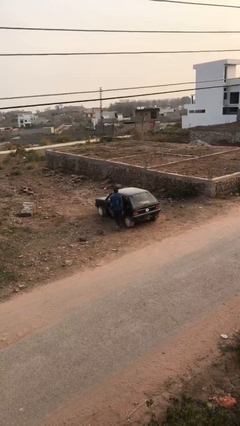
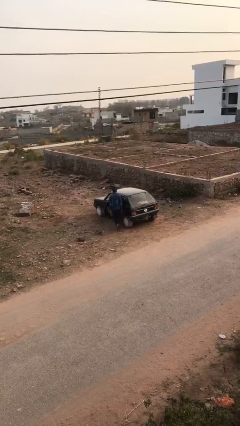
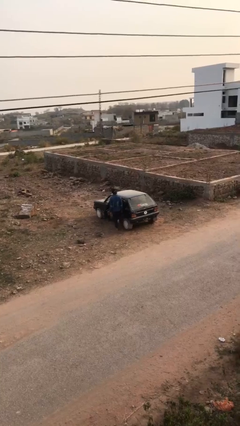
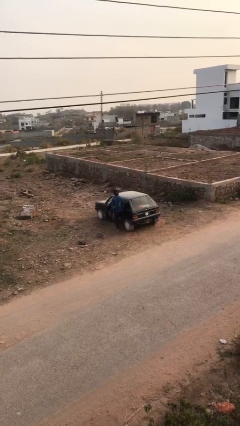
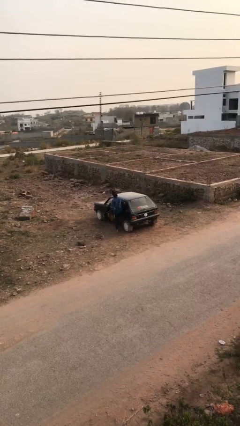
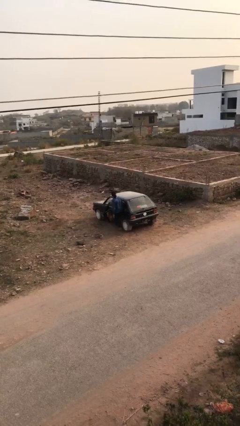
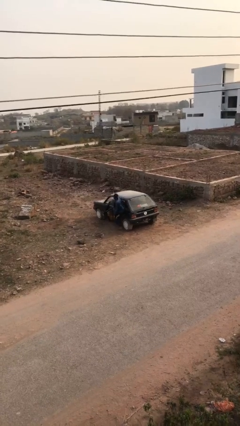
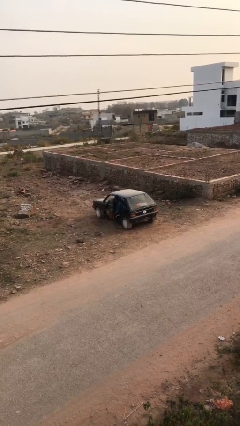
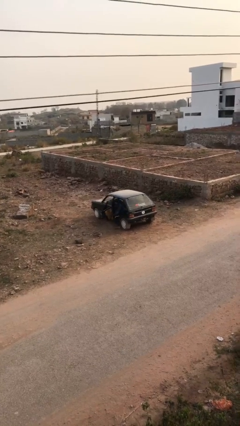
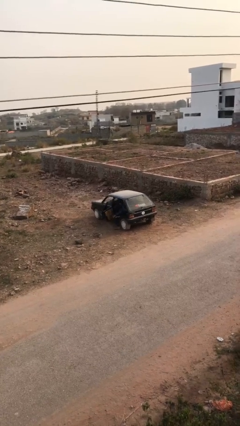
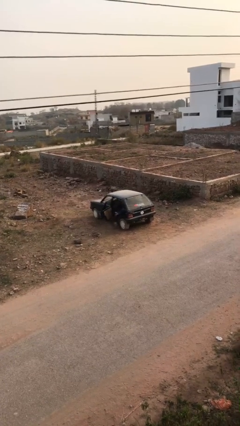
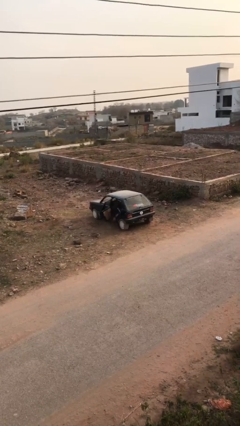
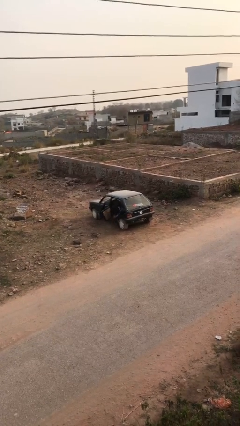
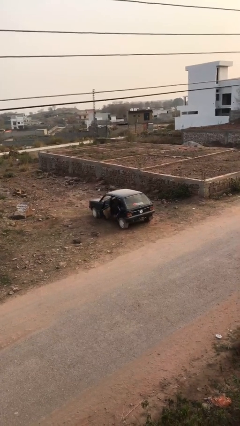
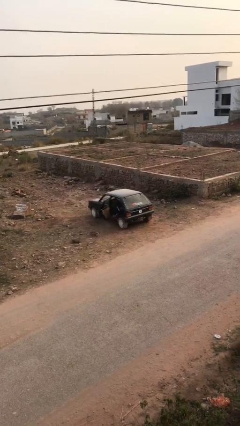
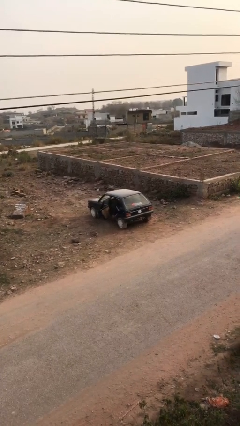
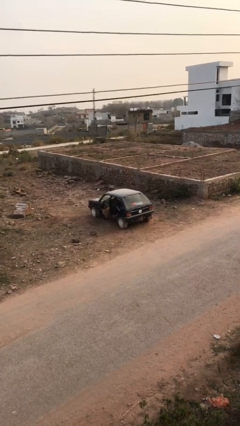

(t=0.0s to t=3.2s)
person enters car

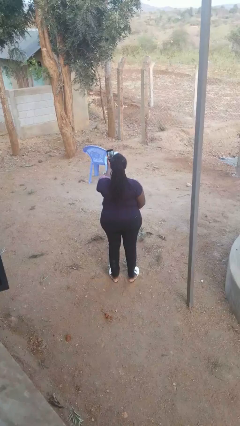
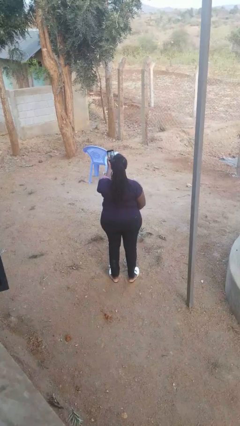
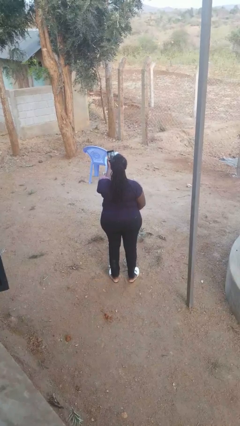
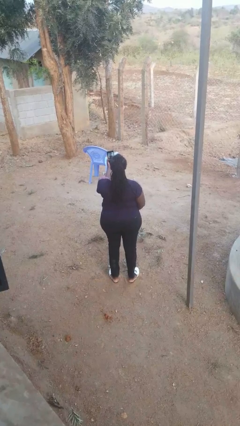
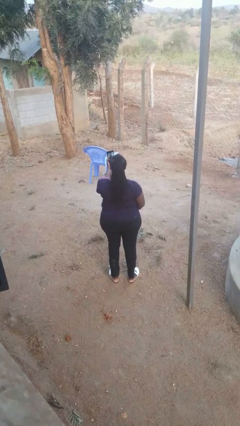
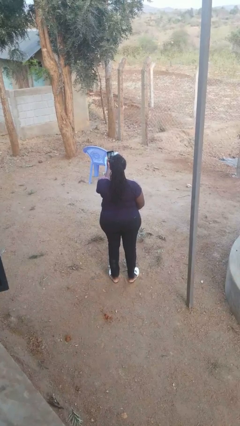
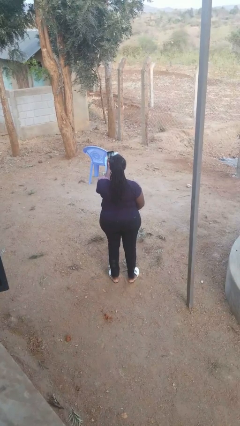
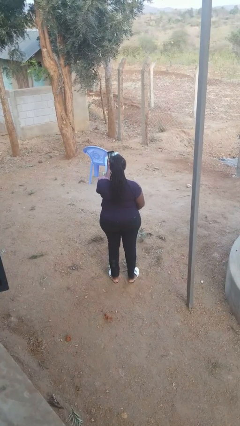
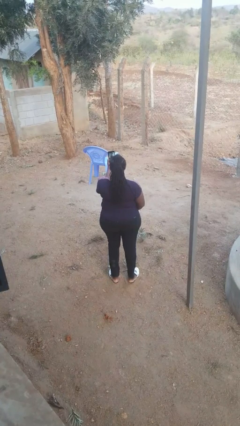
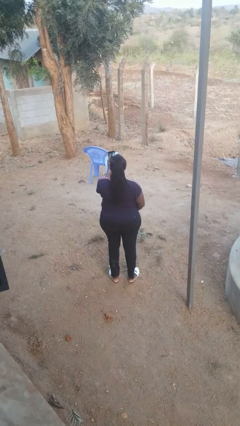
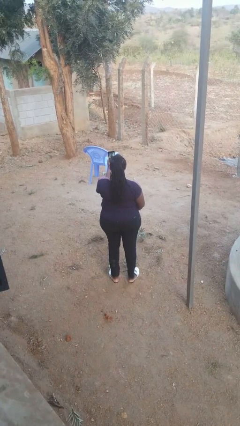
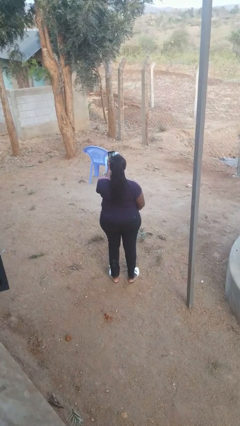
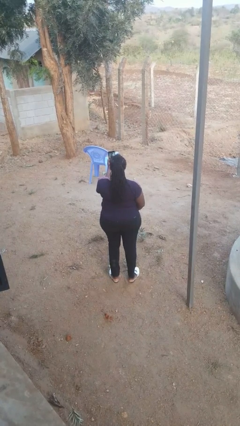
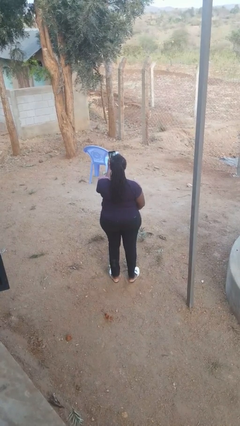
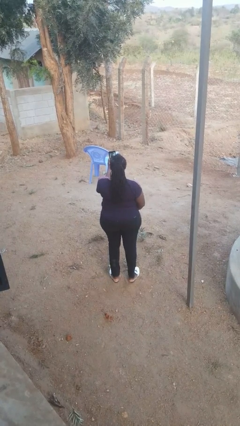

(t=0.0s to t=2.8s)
person takes selfie

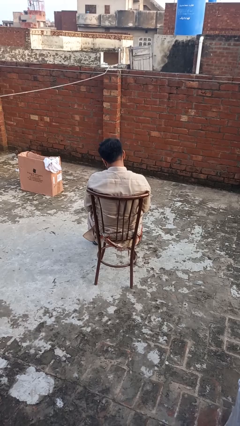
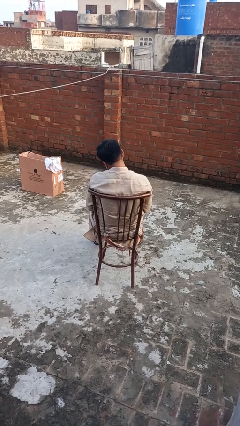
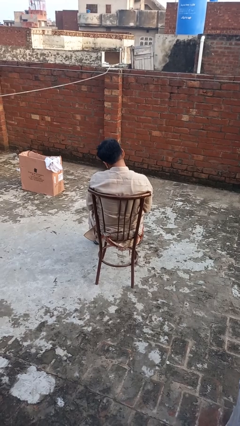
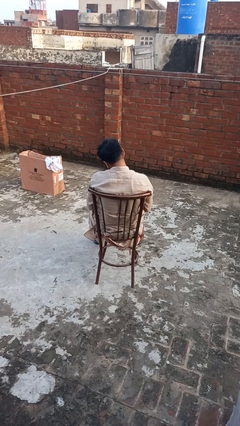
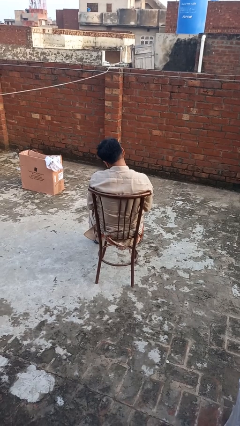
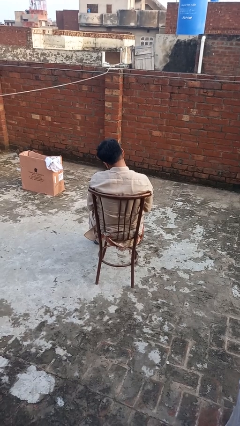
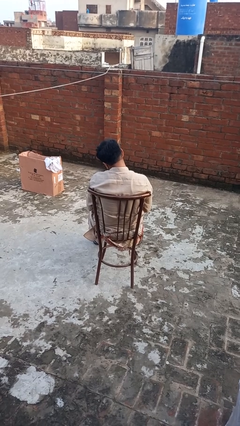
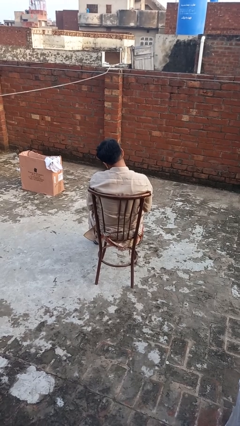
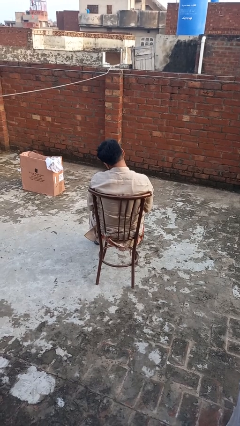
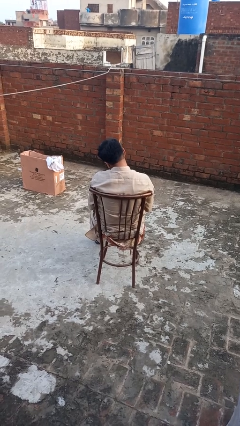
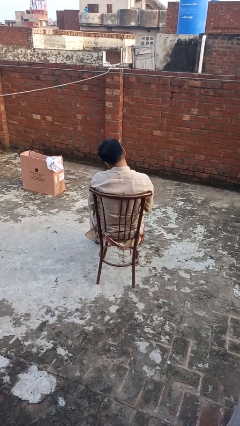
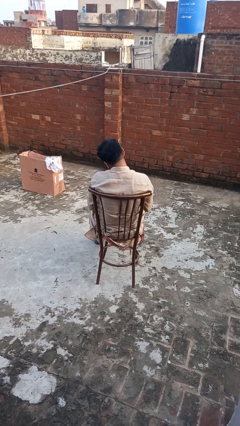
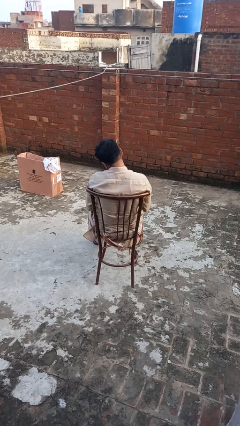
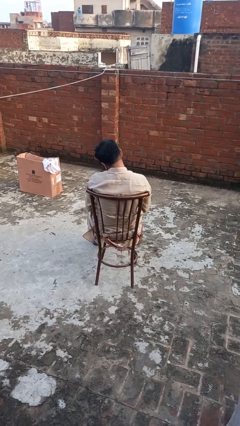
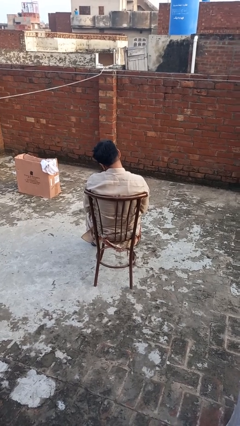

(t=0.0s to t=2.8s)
person stirs mug

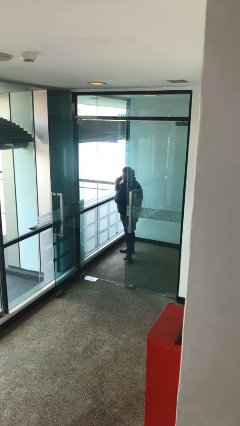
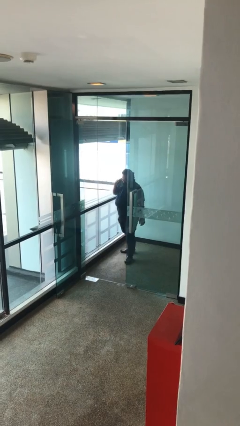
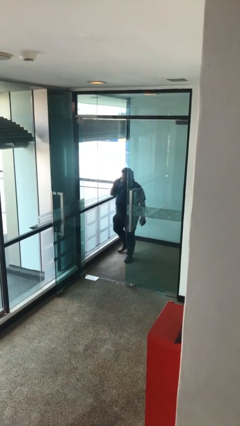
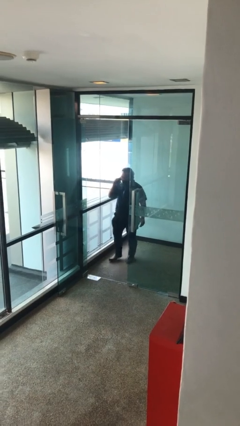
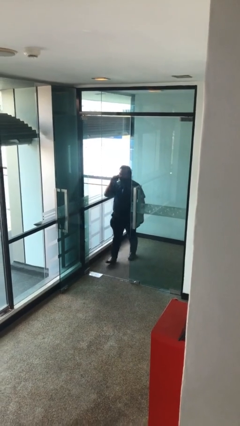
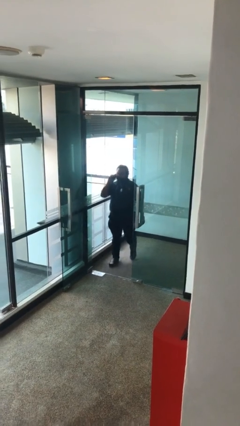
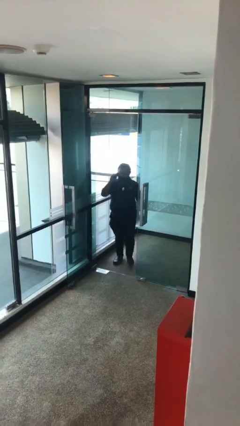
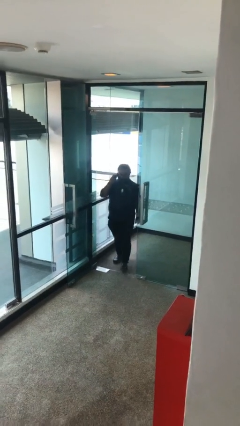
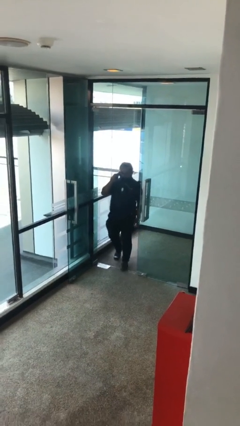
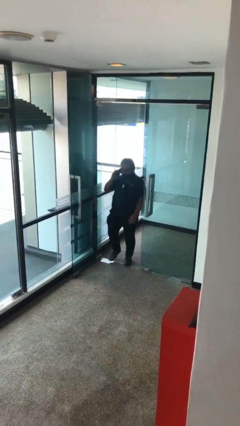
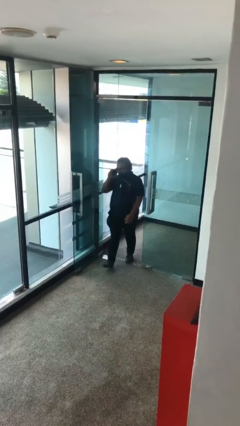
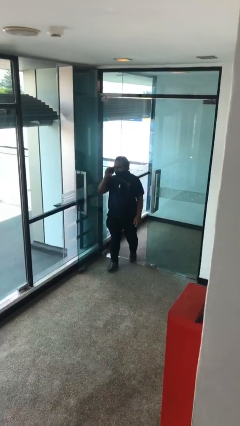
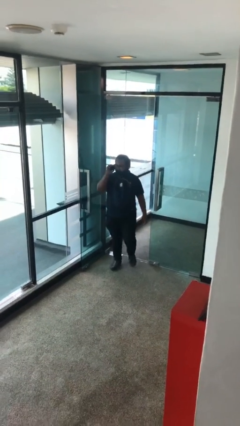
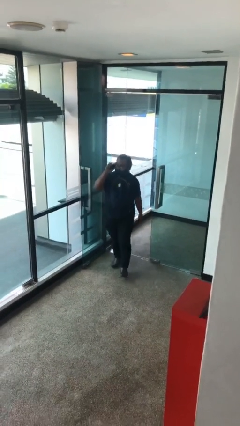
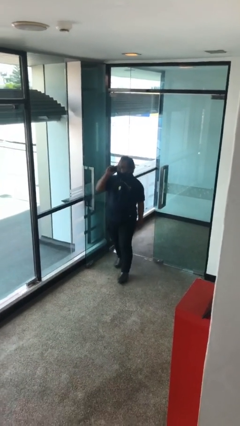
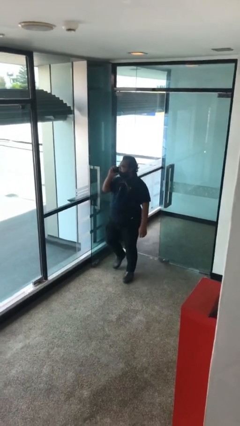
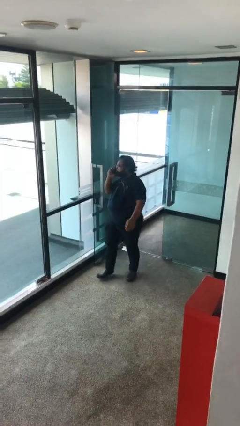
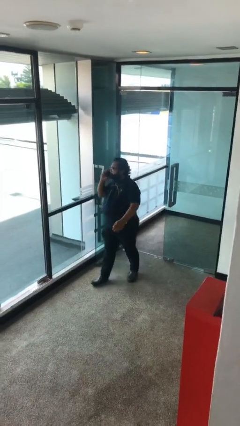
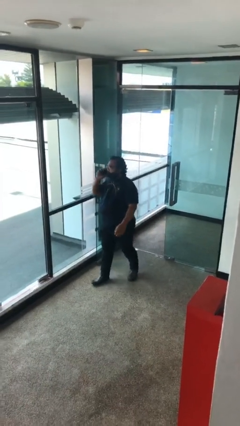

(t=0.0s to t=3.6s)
person enters scene through structure

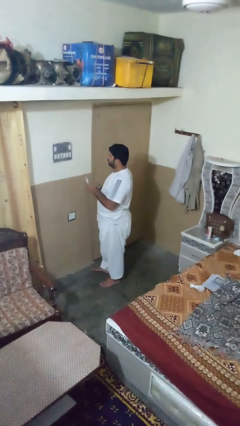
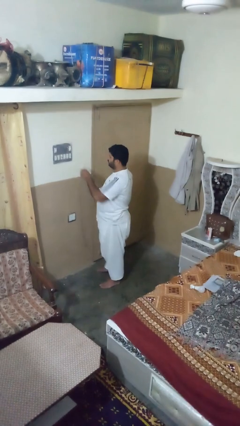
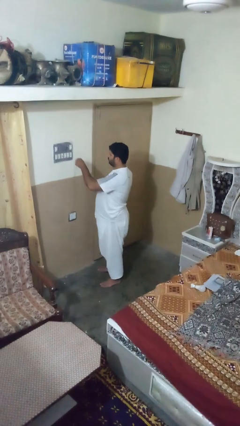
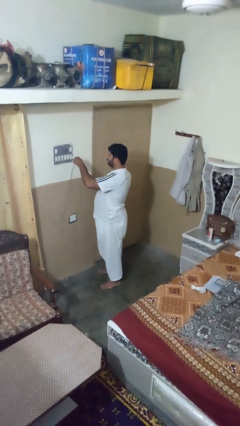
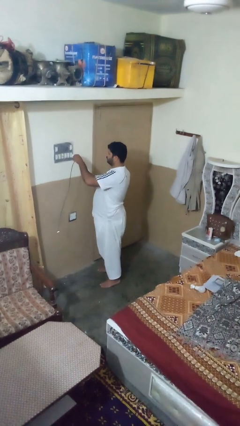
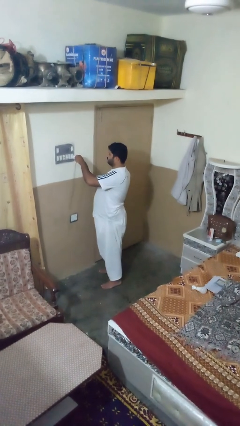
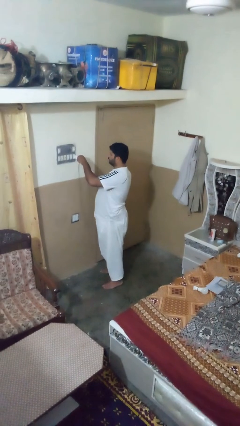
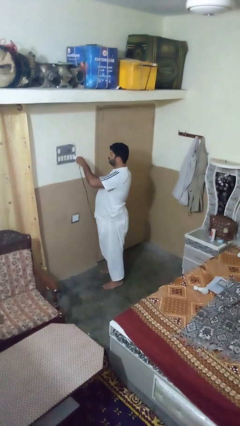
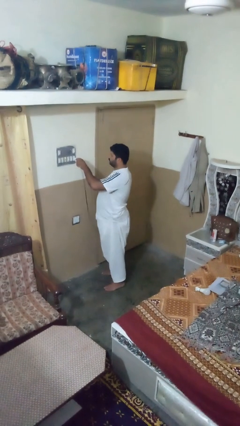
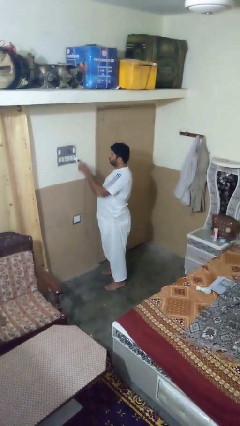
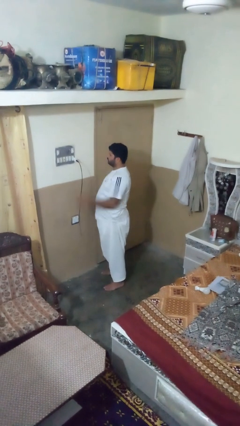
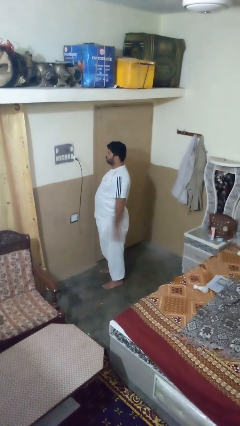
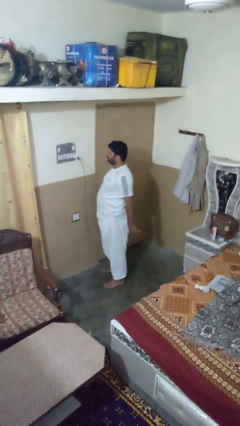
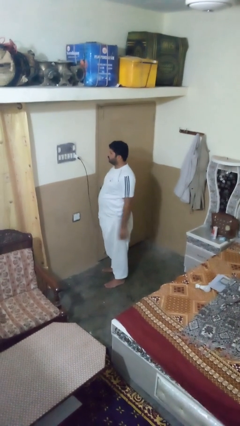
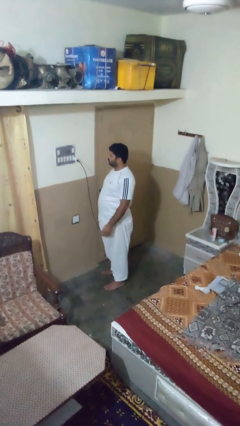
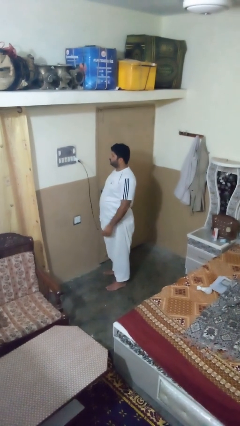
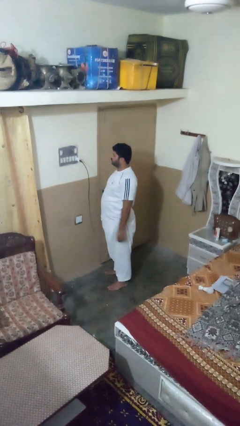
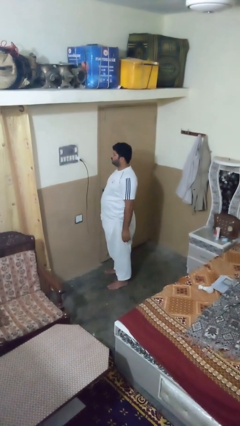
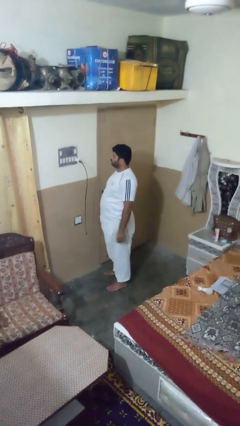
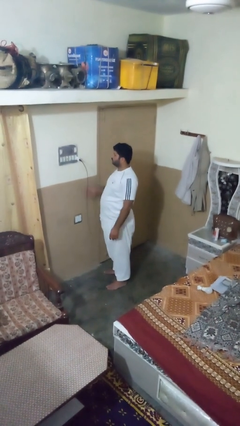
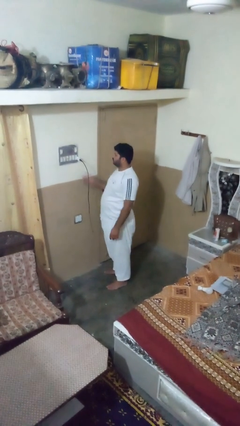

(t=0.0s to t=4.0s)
person plugs into electrical socket

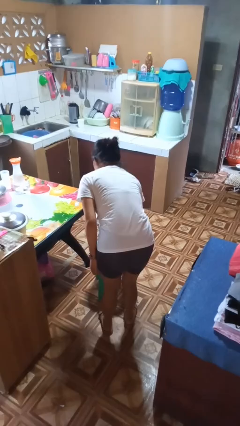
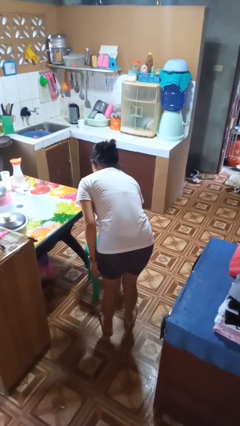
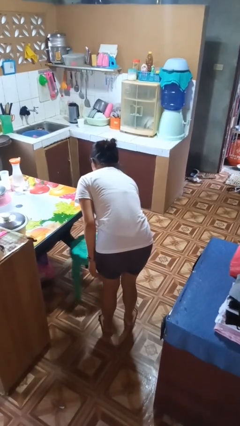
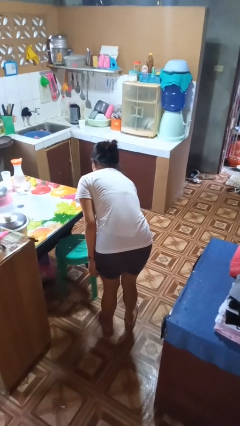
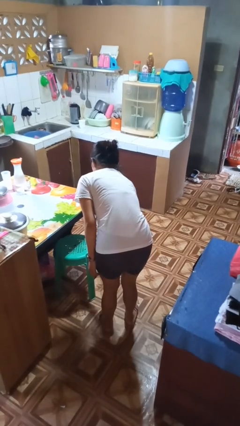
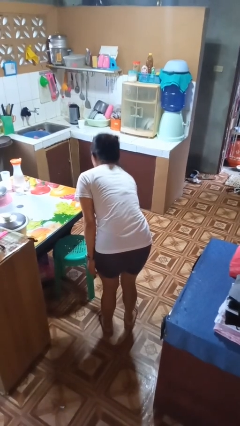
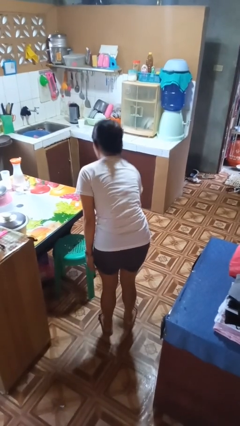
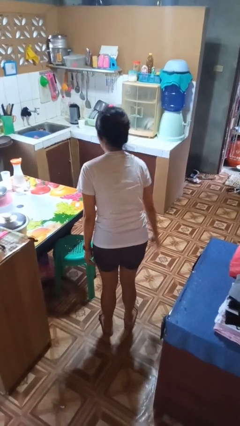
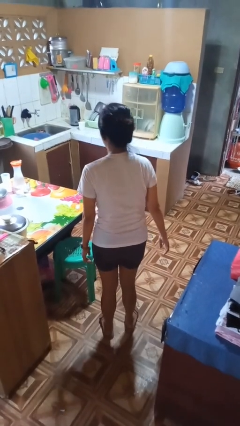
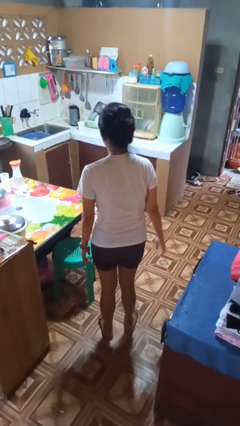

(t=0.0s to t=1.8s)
person pushes in chair
